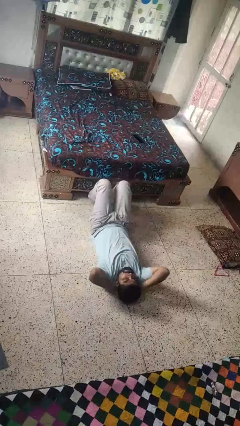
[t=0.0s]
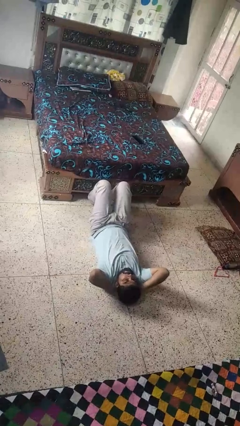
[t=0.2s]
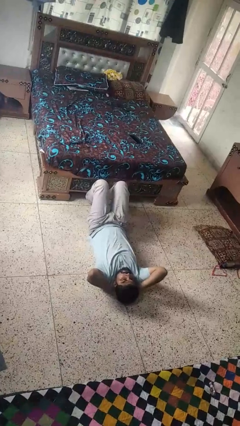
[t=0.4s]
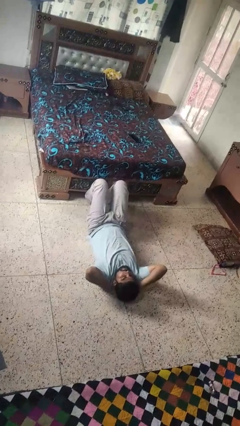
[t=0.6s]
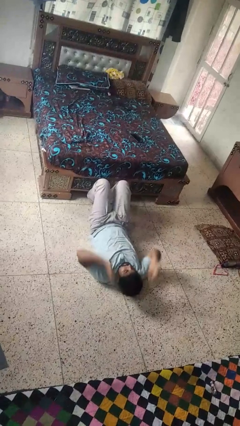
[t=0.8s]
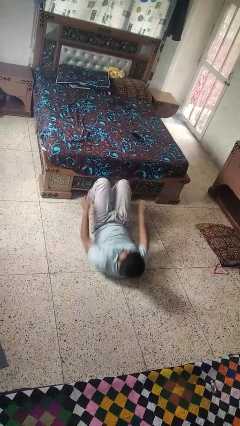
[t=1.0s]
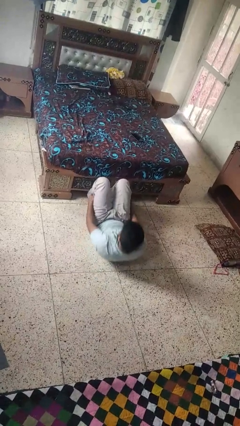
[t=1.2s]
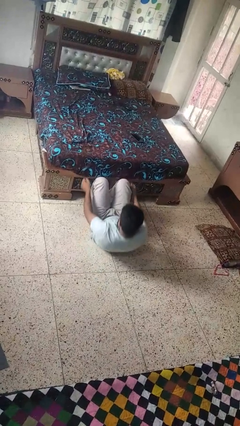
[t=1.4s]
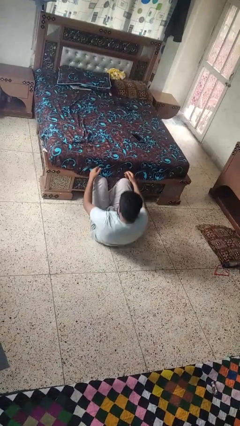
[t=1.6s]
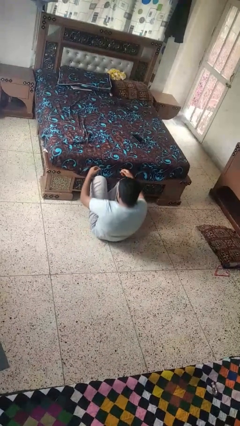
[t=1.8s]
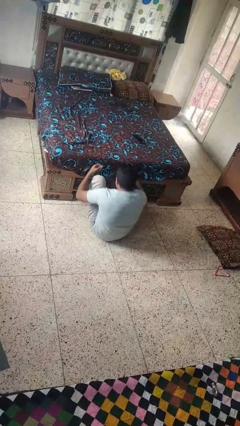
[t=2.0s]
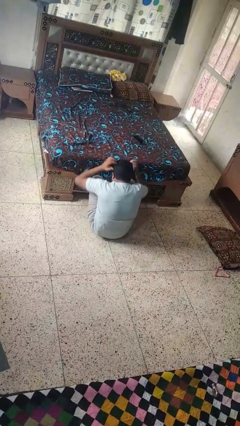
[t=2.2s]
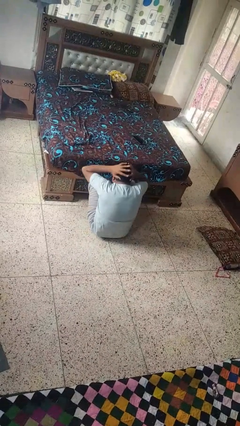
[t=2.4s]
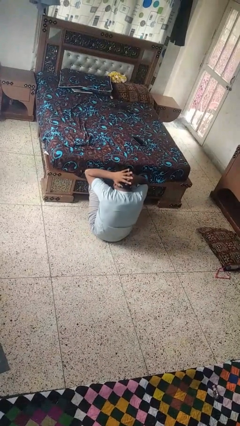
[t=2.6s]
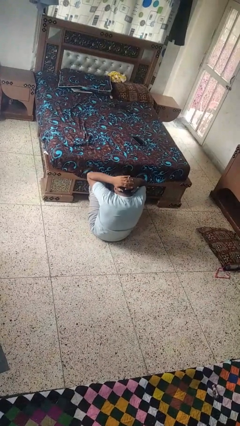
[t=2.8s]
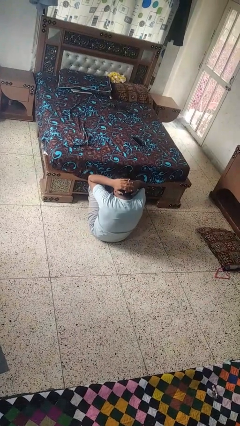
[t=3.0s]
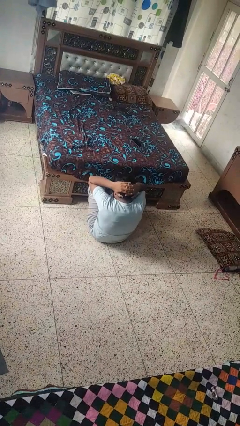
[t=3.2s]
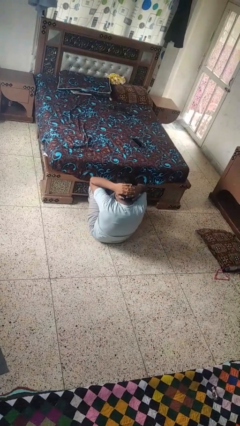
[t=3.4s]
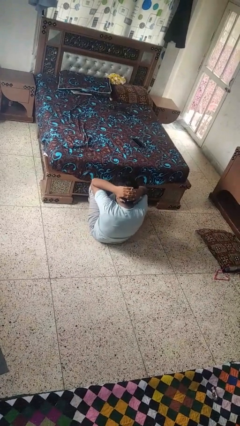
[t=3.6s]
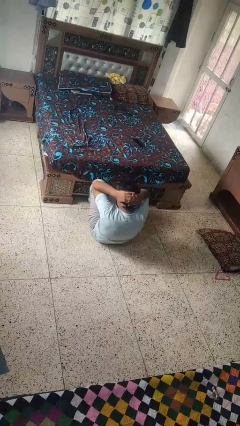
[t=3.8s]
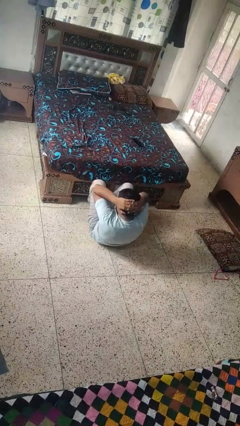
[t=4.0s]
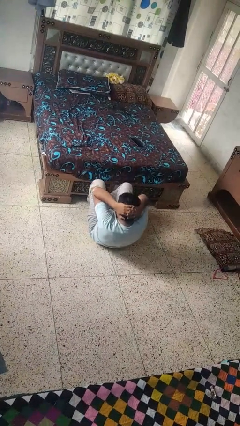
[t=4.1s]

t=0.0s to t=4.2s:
person exercises with situp

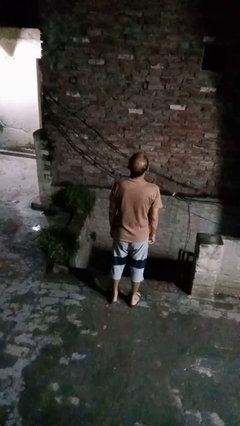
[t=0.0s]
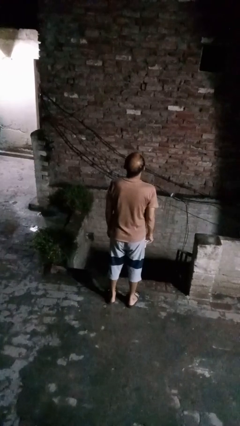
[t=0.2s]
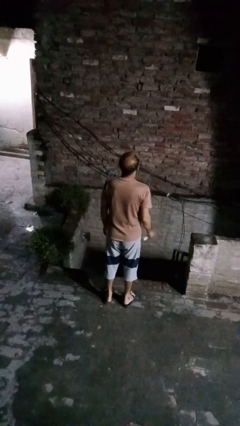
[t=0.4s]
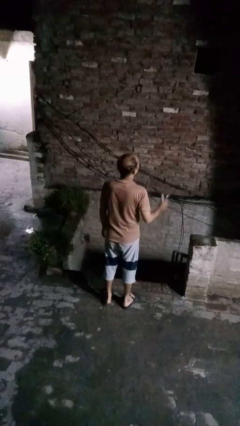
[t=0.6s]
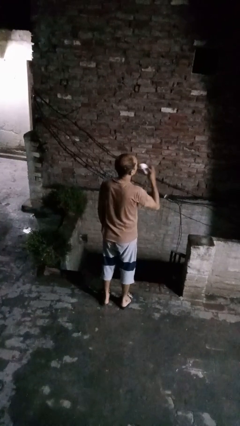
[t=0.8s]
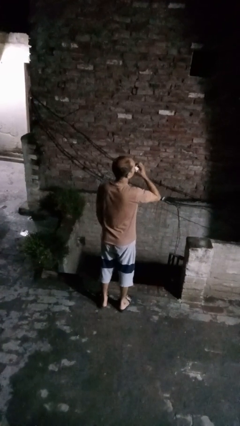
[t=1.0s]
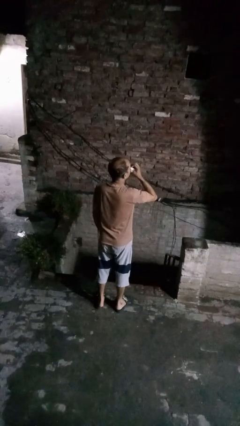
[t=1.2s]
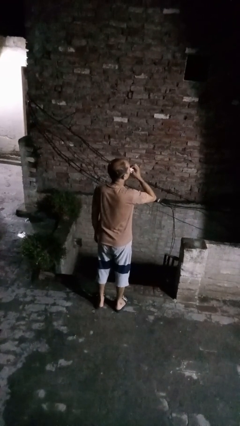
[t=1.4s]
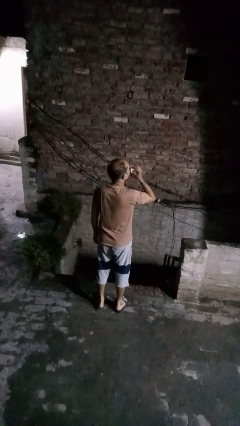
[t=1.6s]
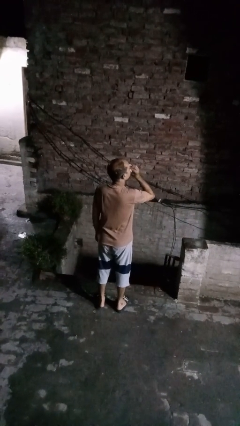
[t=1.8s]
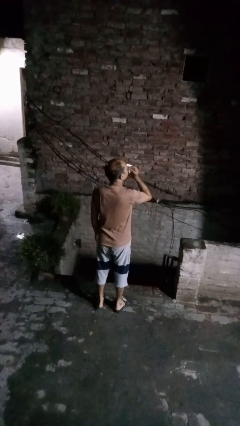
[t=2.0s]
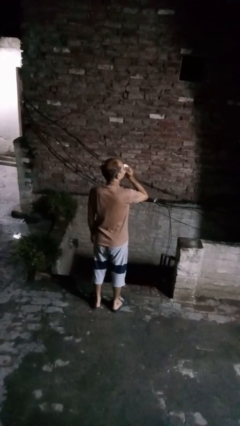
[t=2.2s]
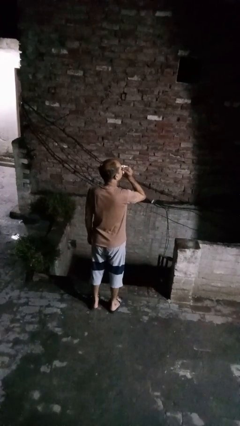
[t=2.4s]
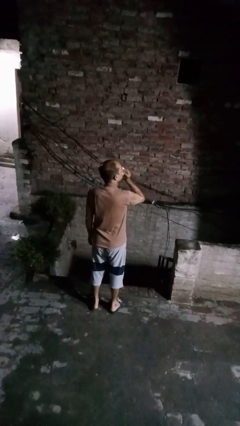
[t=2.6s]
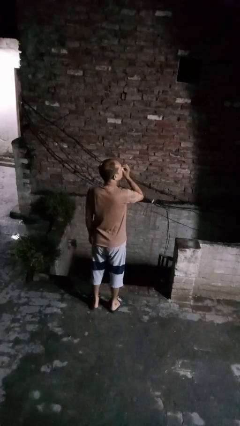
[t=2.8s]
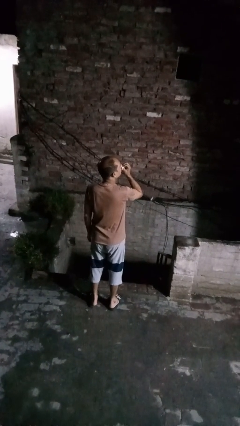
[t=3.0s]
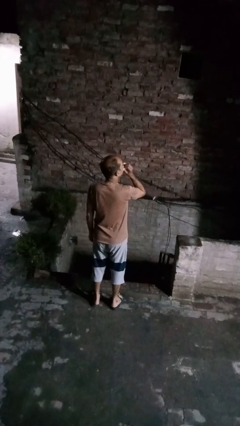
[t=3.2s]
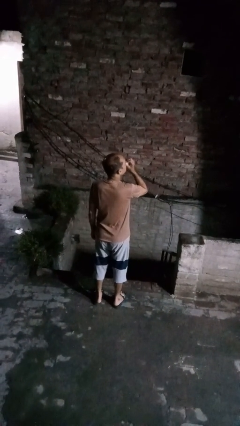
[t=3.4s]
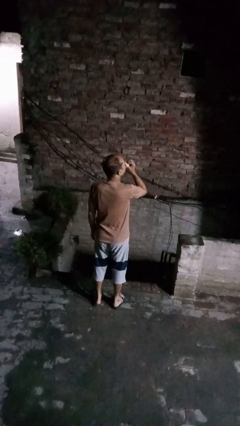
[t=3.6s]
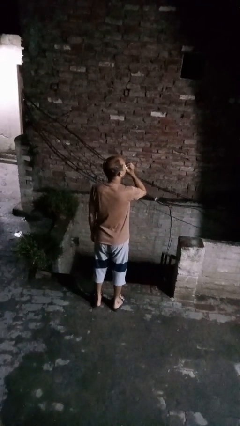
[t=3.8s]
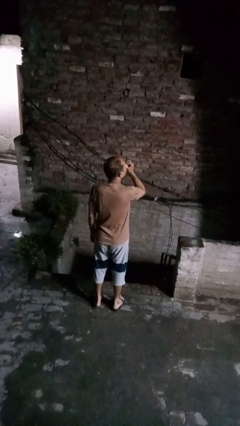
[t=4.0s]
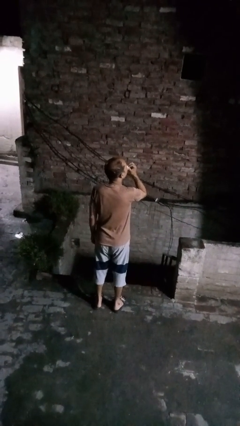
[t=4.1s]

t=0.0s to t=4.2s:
person blows nose

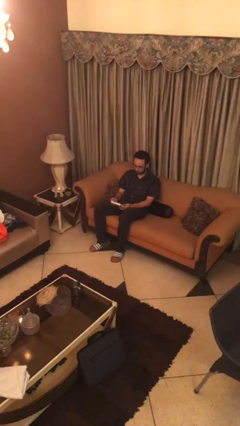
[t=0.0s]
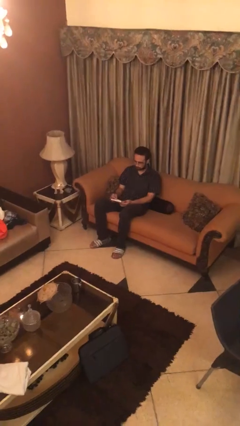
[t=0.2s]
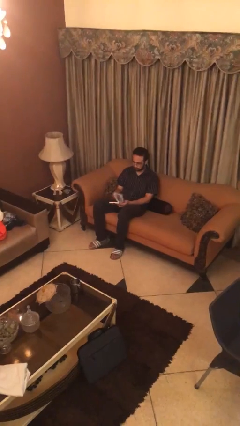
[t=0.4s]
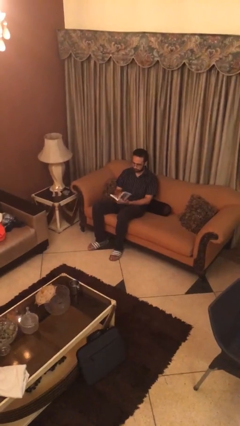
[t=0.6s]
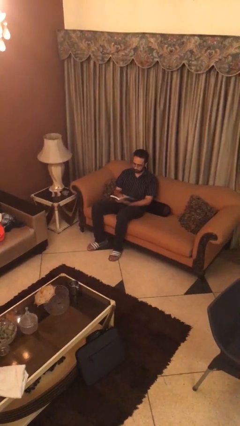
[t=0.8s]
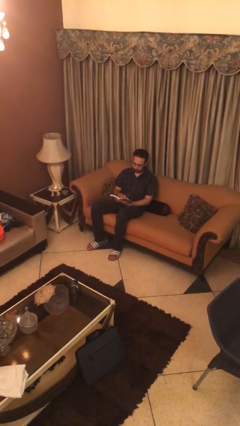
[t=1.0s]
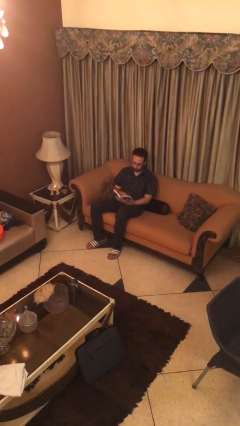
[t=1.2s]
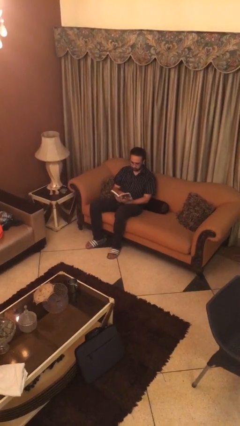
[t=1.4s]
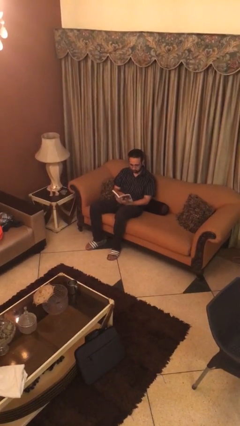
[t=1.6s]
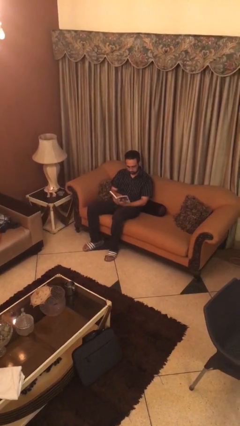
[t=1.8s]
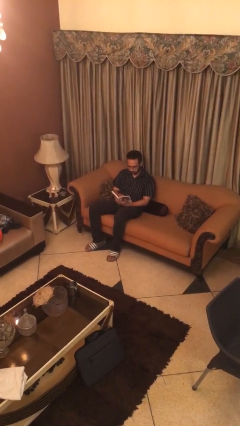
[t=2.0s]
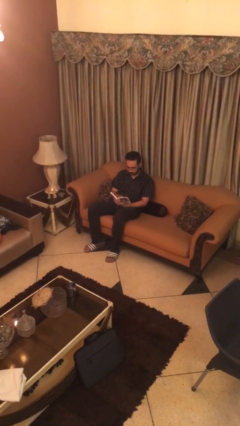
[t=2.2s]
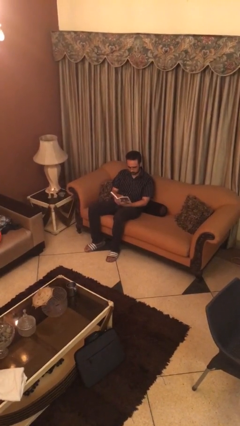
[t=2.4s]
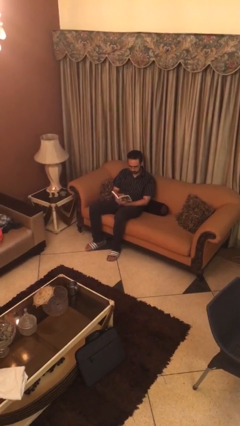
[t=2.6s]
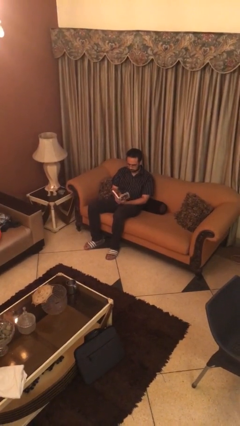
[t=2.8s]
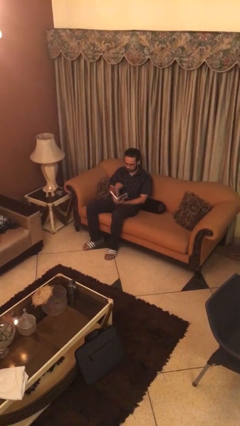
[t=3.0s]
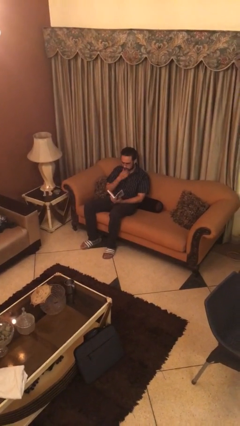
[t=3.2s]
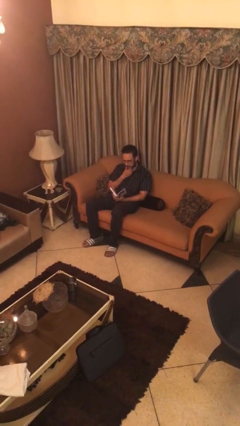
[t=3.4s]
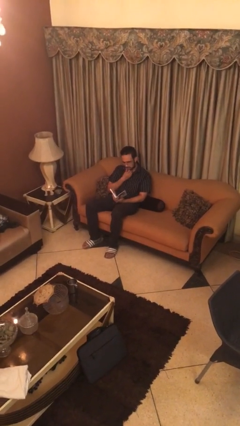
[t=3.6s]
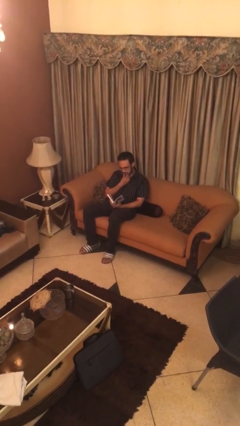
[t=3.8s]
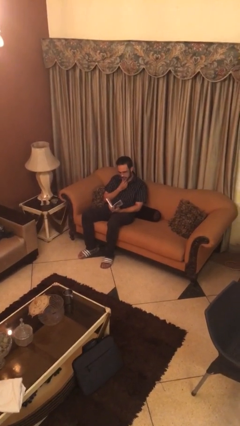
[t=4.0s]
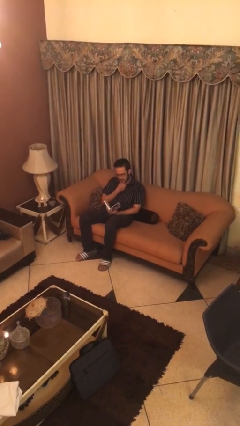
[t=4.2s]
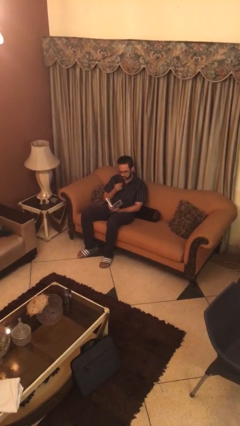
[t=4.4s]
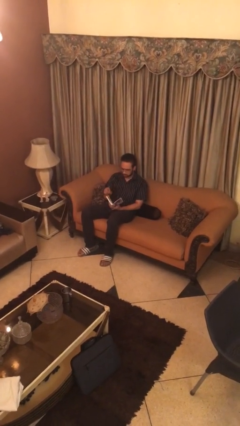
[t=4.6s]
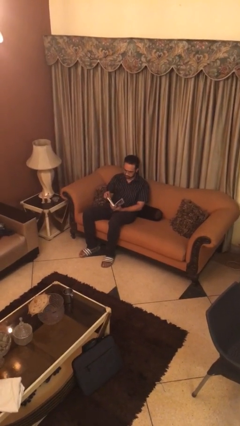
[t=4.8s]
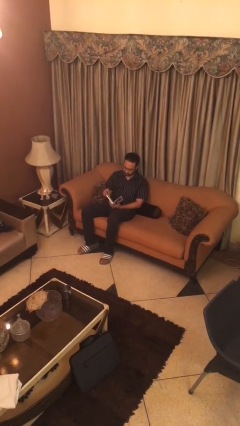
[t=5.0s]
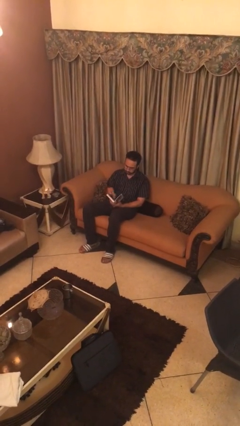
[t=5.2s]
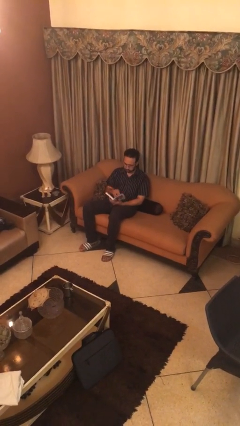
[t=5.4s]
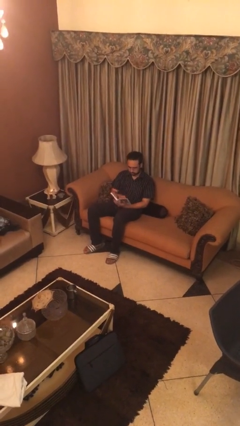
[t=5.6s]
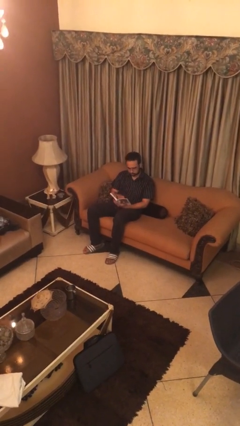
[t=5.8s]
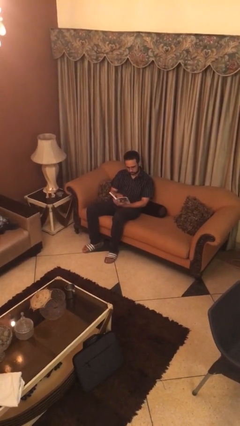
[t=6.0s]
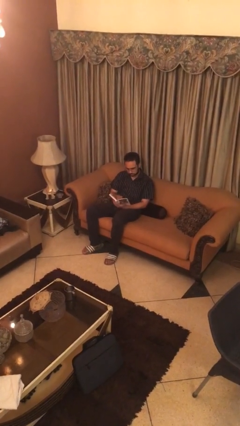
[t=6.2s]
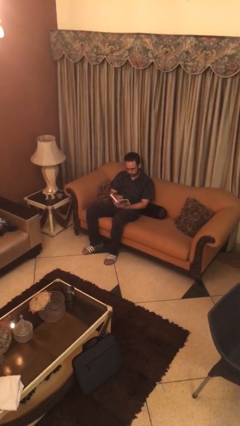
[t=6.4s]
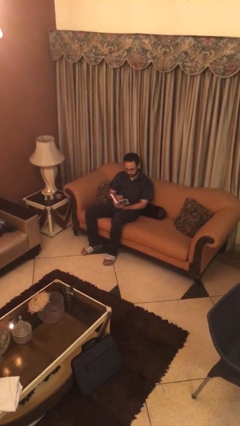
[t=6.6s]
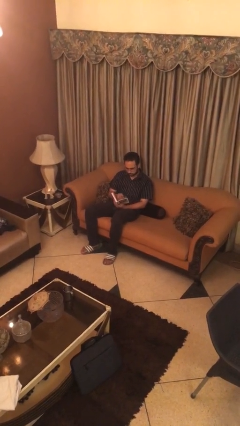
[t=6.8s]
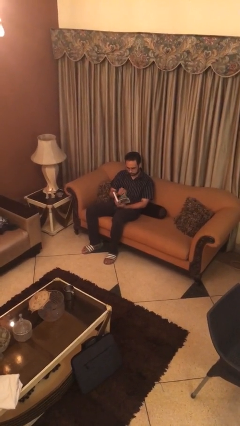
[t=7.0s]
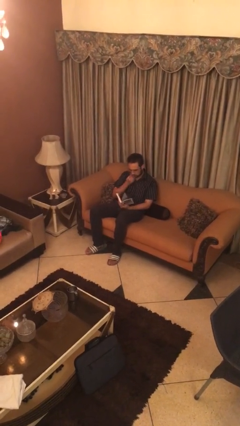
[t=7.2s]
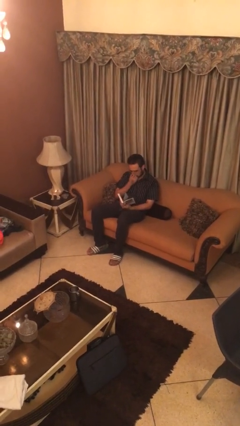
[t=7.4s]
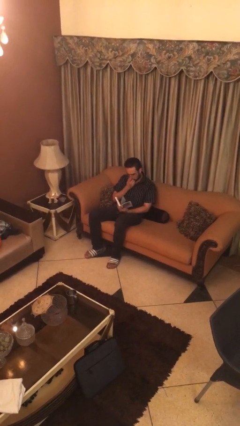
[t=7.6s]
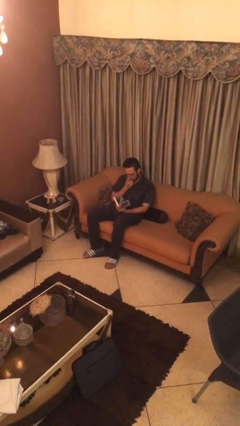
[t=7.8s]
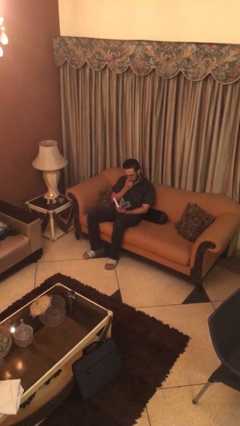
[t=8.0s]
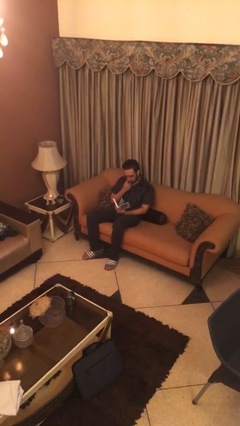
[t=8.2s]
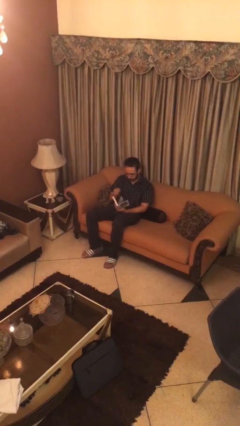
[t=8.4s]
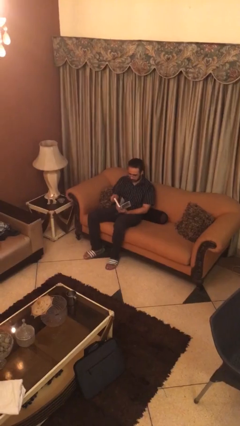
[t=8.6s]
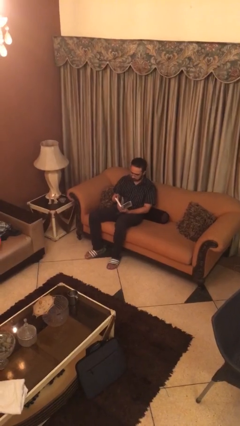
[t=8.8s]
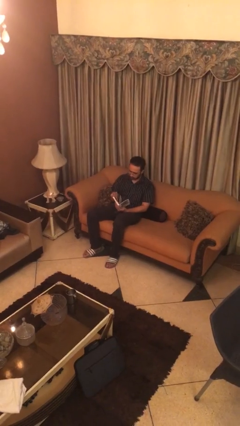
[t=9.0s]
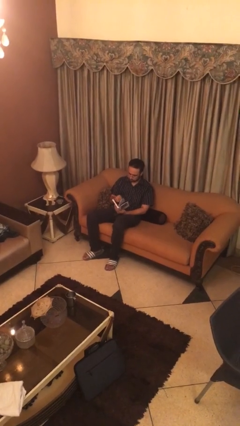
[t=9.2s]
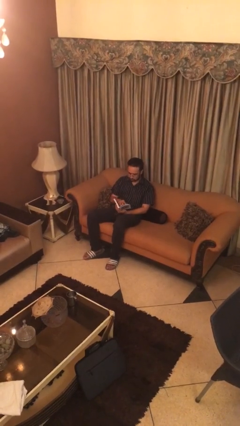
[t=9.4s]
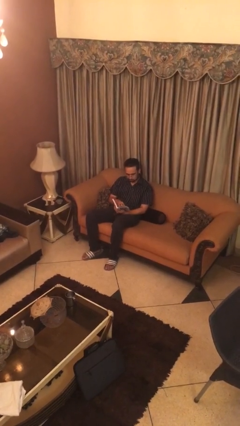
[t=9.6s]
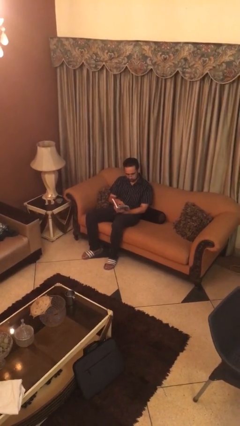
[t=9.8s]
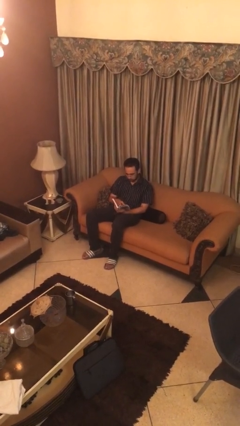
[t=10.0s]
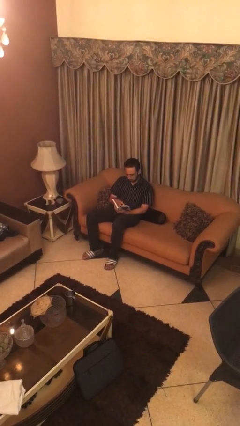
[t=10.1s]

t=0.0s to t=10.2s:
person reads document
